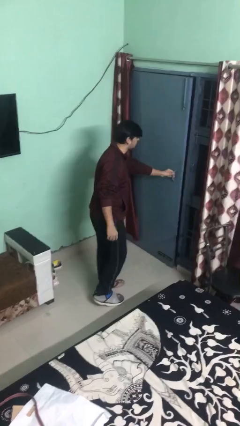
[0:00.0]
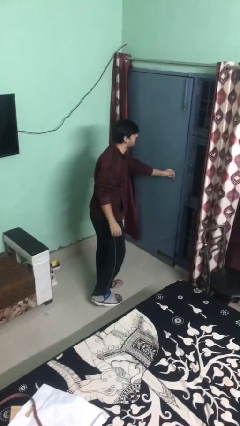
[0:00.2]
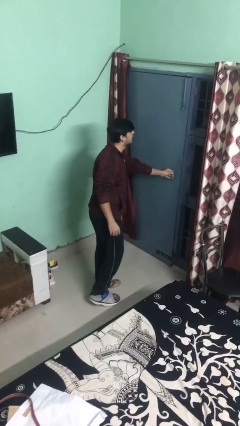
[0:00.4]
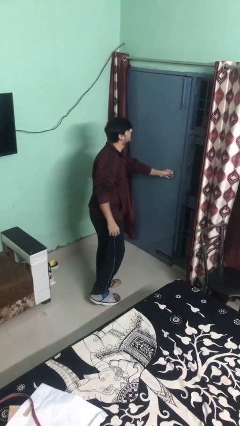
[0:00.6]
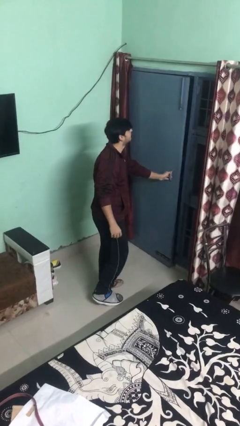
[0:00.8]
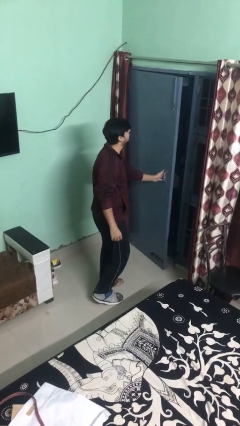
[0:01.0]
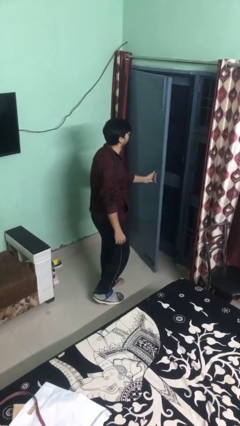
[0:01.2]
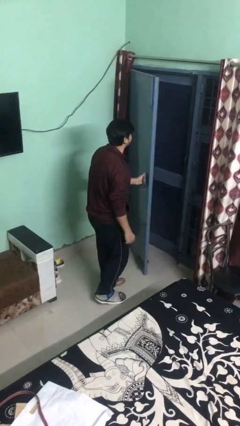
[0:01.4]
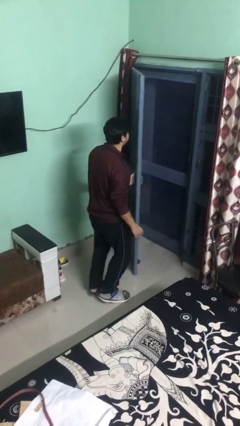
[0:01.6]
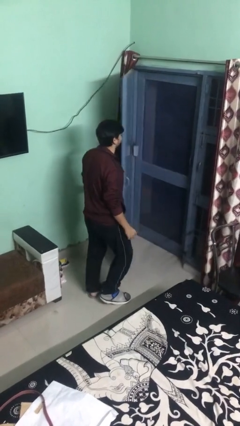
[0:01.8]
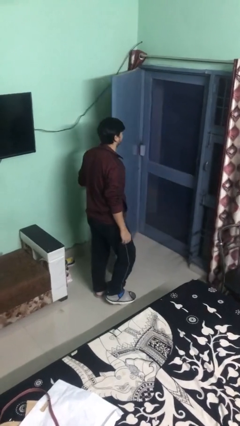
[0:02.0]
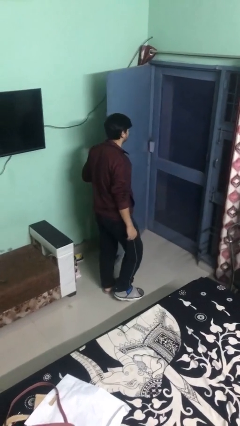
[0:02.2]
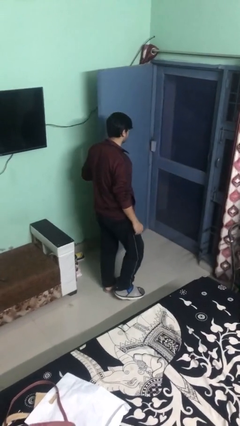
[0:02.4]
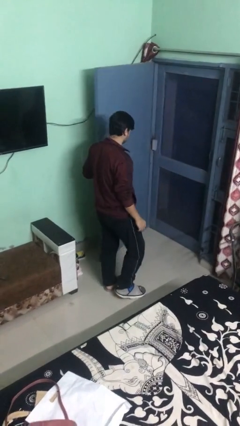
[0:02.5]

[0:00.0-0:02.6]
person opens facility door

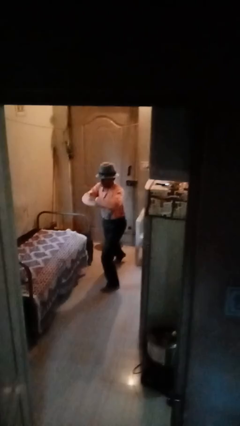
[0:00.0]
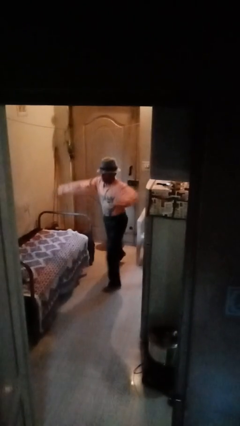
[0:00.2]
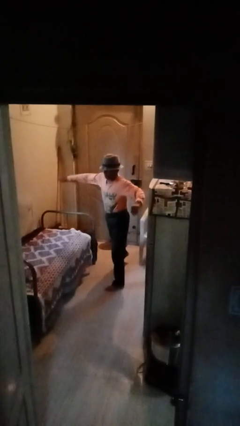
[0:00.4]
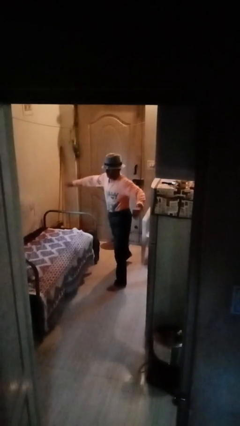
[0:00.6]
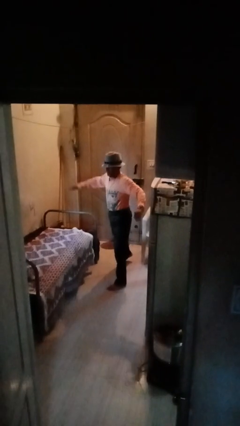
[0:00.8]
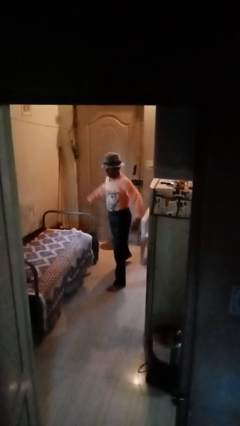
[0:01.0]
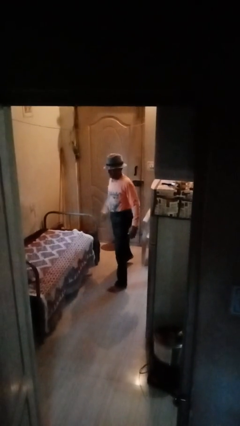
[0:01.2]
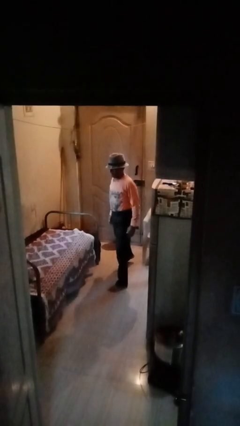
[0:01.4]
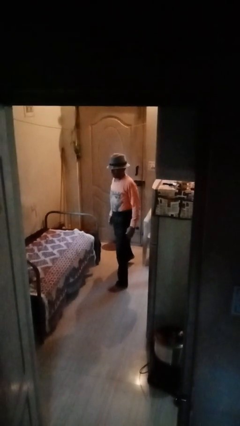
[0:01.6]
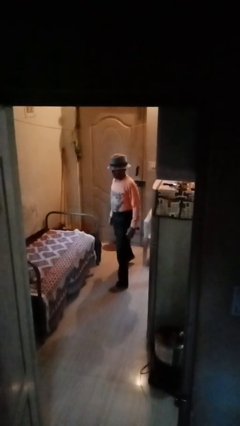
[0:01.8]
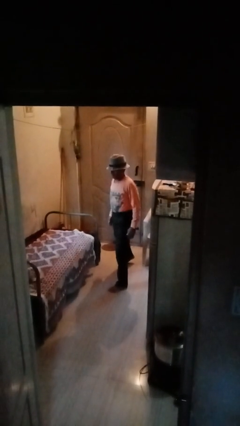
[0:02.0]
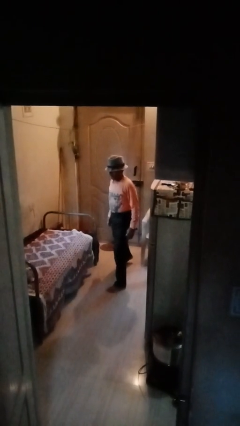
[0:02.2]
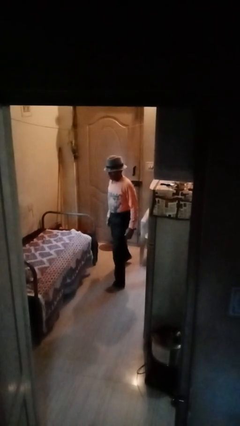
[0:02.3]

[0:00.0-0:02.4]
person karate chop

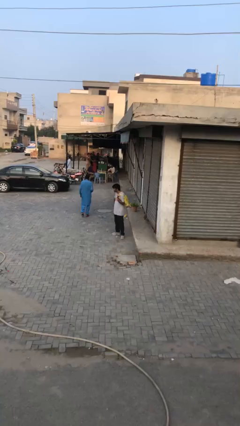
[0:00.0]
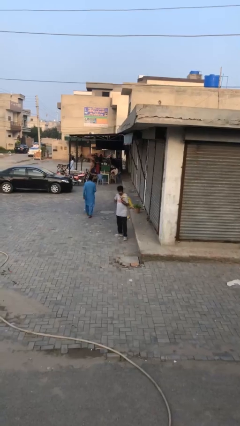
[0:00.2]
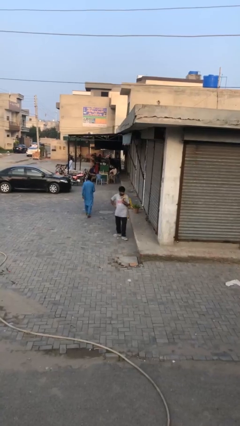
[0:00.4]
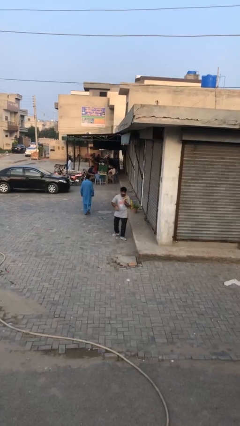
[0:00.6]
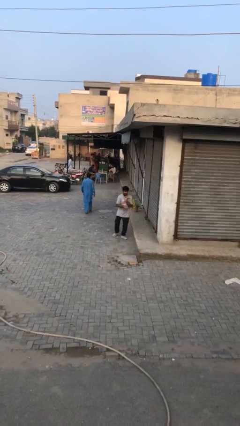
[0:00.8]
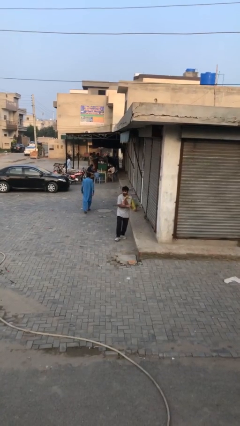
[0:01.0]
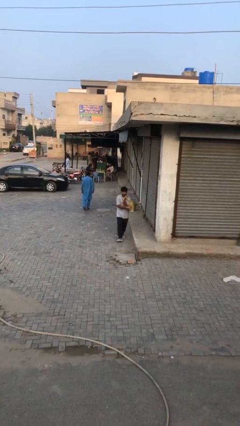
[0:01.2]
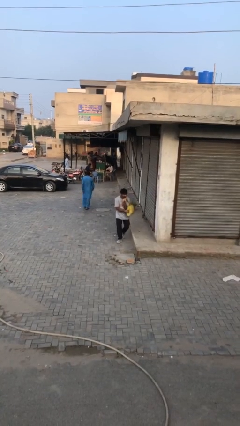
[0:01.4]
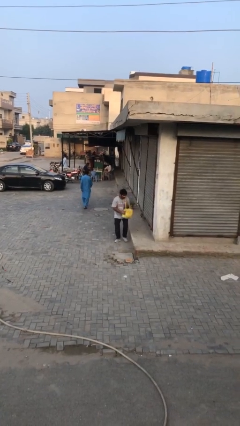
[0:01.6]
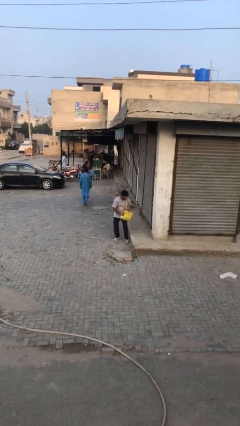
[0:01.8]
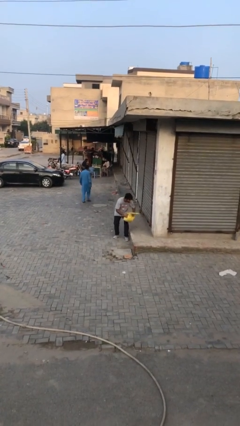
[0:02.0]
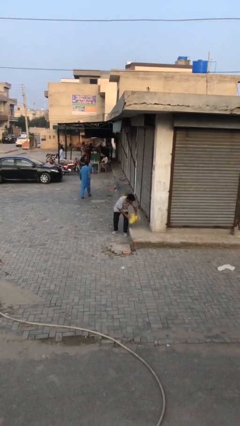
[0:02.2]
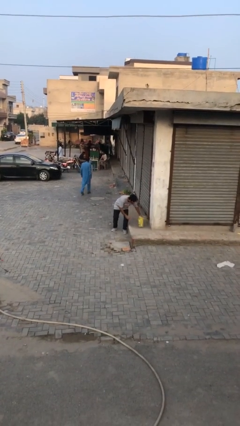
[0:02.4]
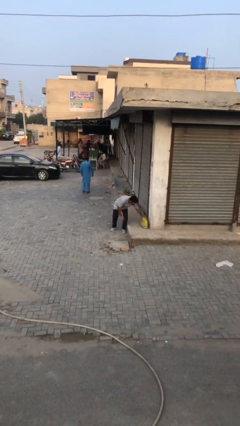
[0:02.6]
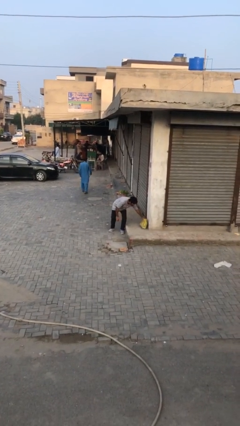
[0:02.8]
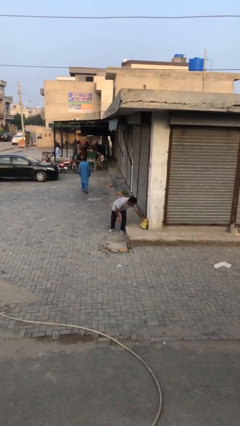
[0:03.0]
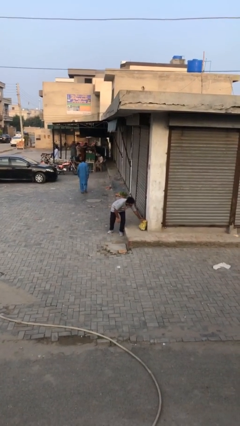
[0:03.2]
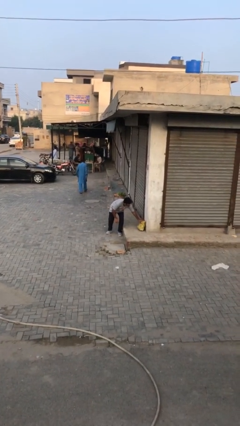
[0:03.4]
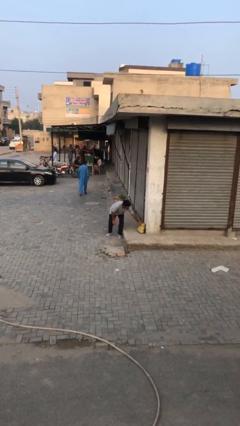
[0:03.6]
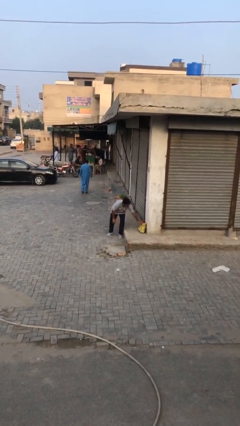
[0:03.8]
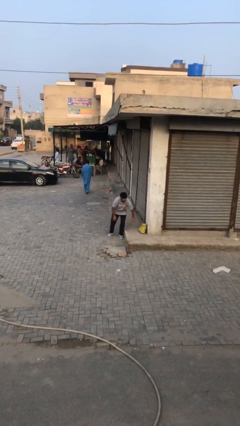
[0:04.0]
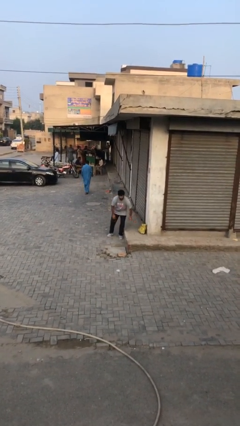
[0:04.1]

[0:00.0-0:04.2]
person puts down object on floor

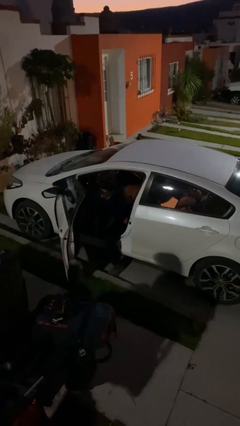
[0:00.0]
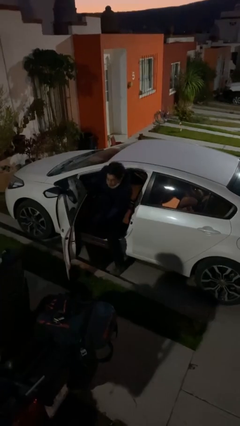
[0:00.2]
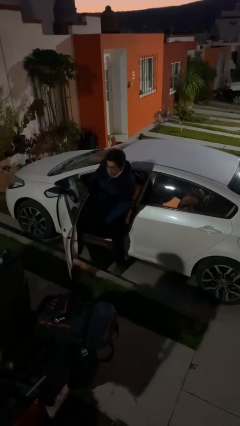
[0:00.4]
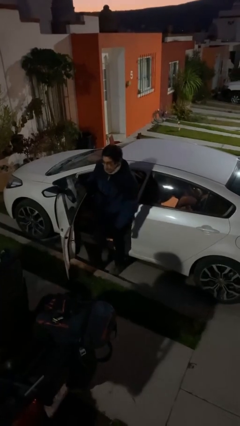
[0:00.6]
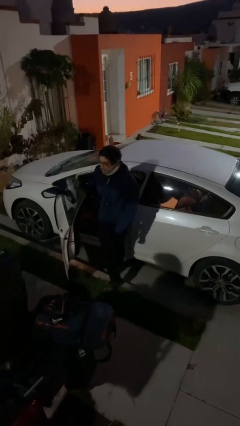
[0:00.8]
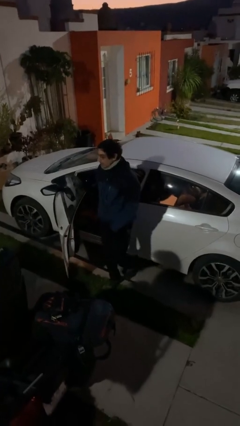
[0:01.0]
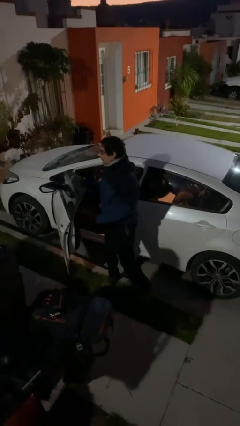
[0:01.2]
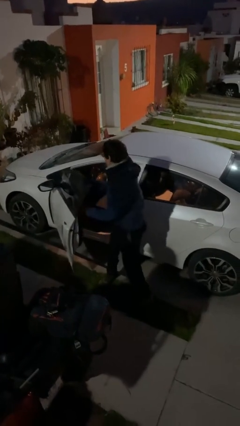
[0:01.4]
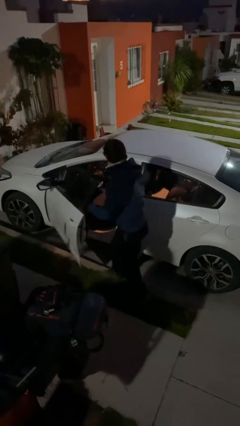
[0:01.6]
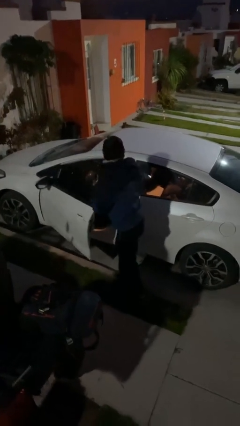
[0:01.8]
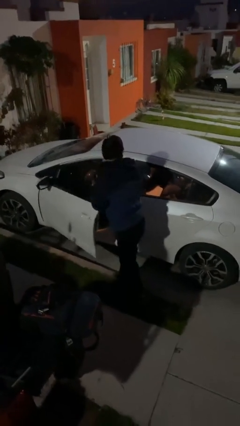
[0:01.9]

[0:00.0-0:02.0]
person exits car

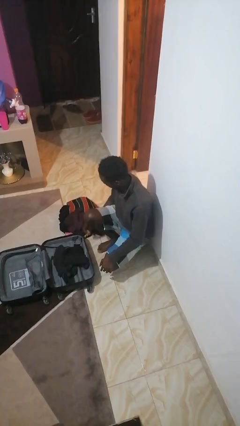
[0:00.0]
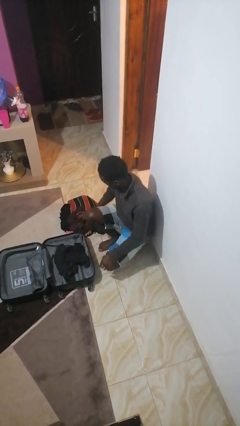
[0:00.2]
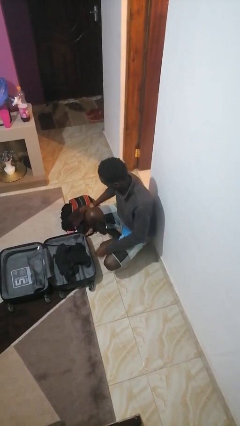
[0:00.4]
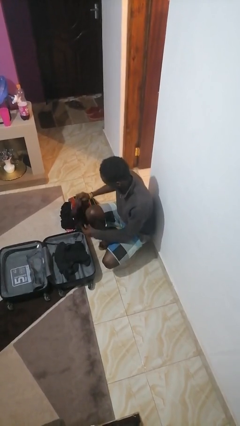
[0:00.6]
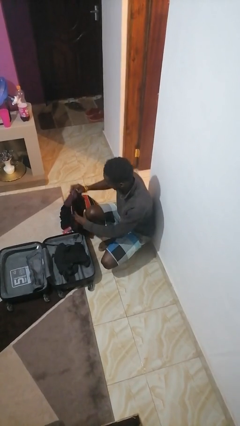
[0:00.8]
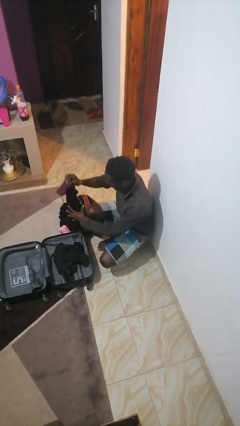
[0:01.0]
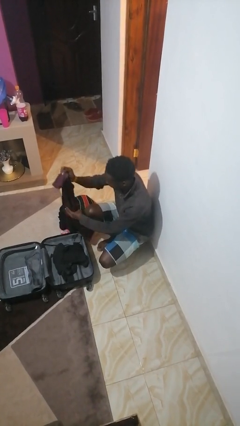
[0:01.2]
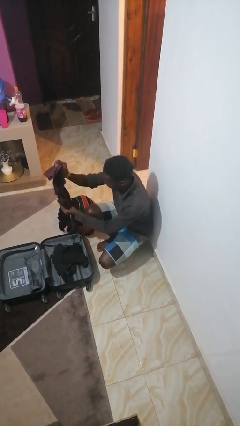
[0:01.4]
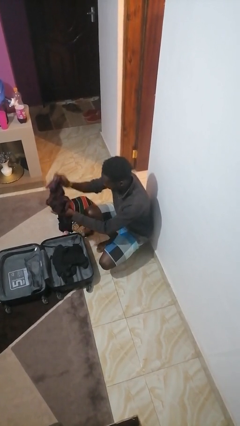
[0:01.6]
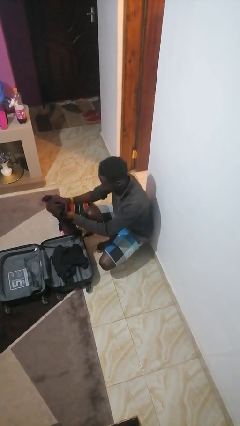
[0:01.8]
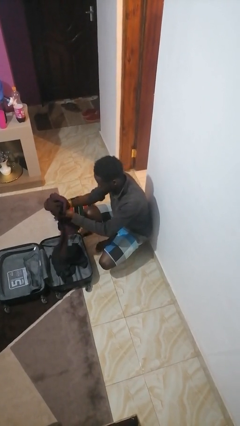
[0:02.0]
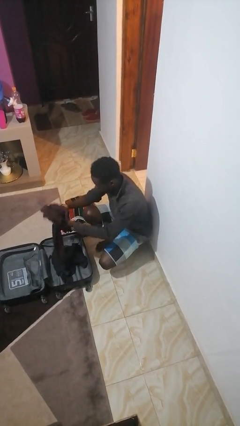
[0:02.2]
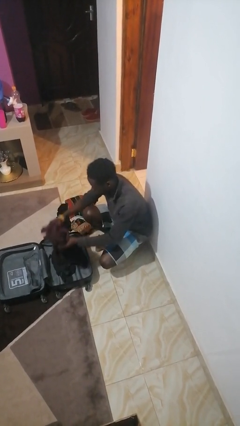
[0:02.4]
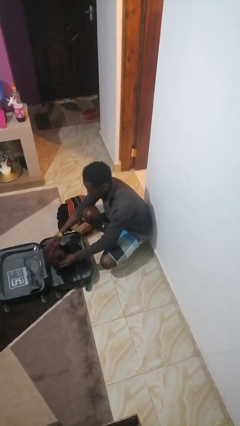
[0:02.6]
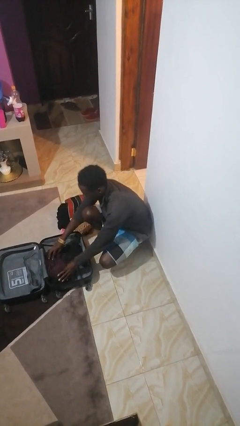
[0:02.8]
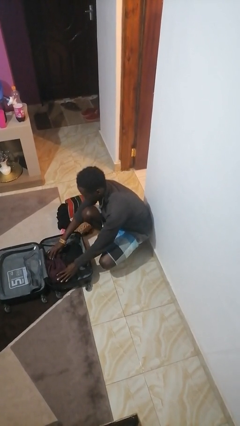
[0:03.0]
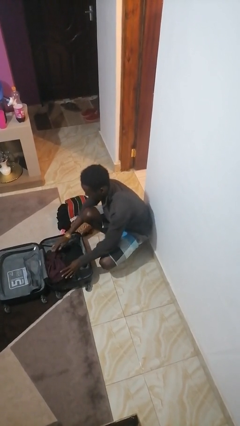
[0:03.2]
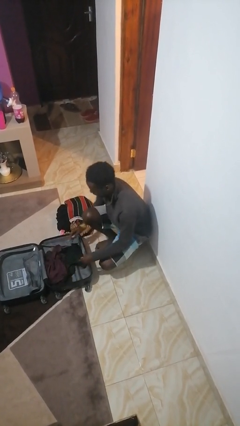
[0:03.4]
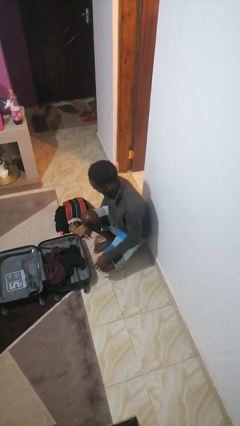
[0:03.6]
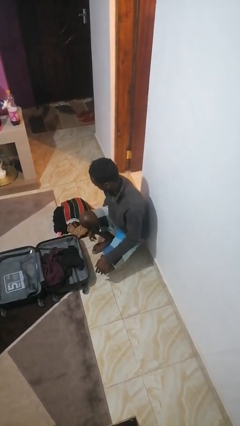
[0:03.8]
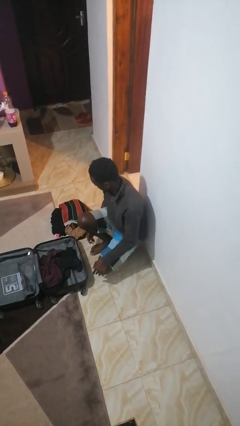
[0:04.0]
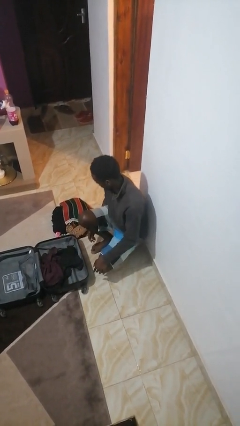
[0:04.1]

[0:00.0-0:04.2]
person loads clothes into suitcase

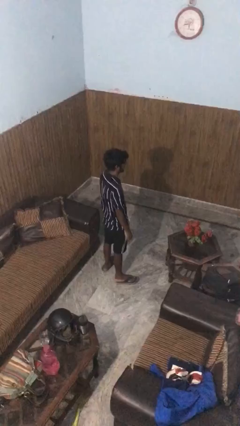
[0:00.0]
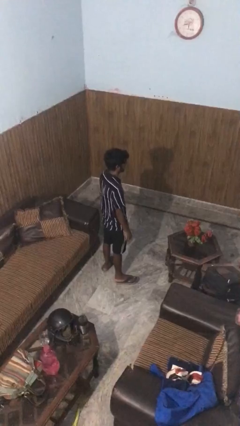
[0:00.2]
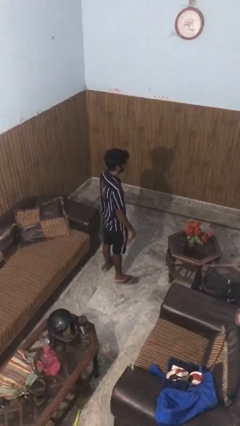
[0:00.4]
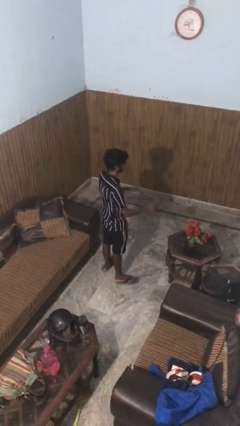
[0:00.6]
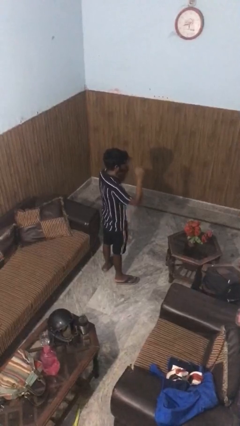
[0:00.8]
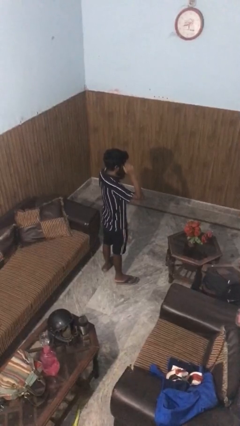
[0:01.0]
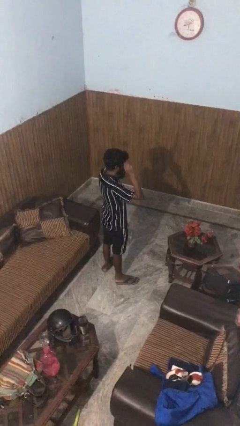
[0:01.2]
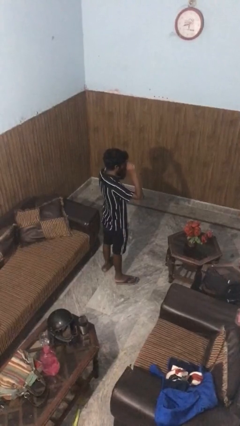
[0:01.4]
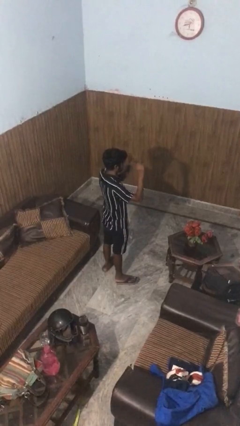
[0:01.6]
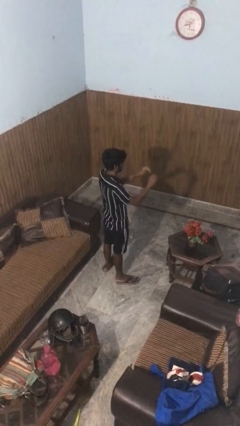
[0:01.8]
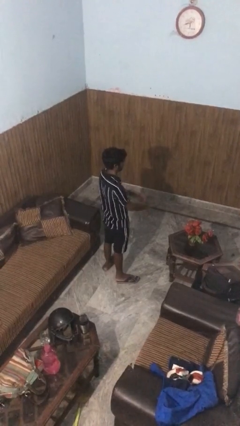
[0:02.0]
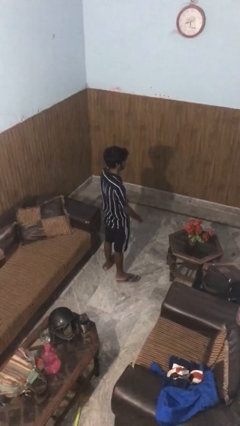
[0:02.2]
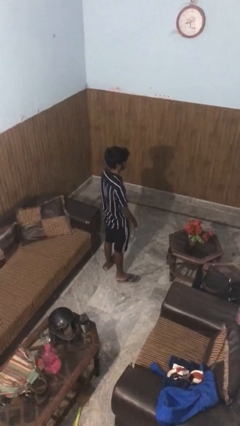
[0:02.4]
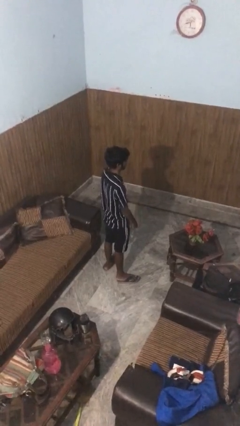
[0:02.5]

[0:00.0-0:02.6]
person takes off glasses
